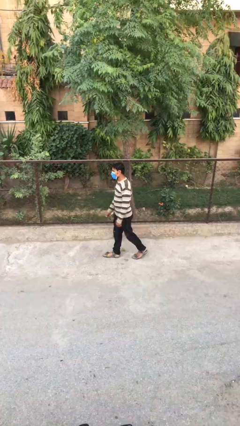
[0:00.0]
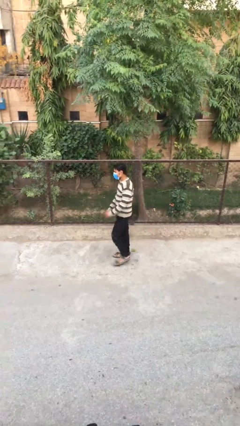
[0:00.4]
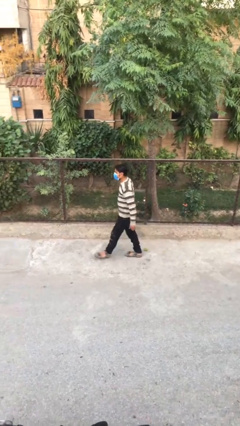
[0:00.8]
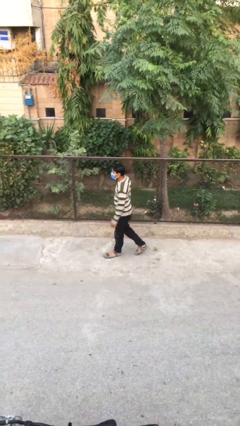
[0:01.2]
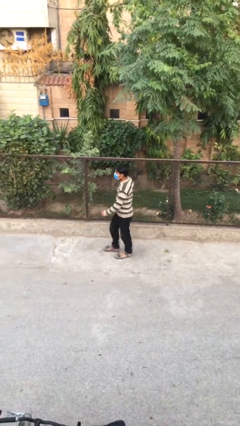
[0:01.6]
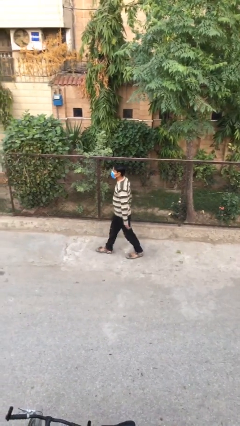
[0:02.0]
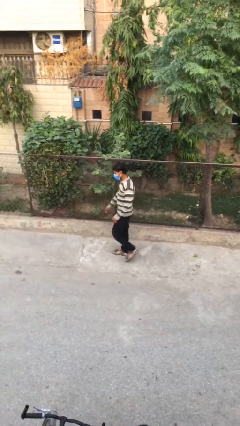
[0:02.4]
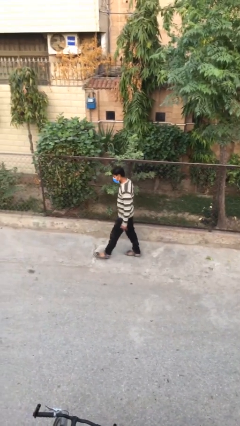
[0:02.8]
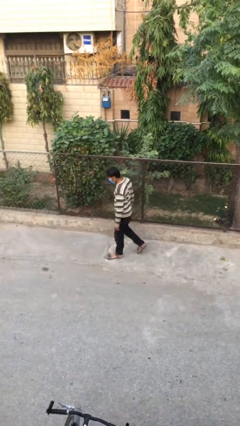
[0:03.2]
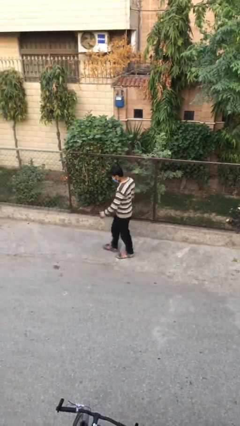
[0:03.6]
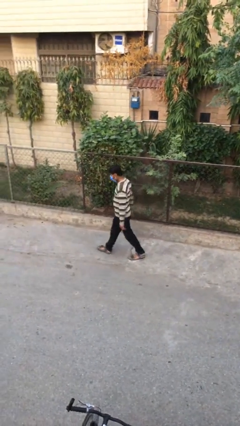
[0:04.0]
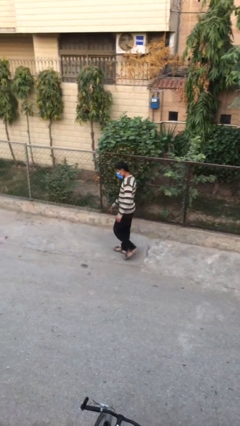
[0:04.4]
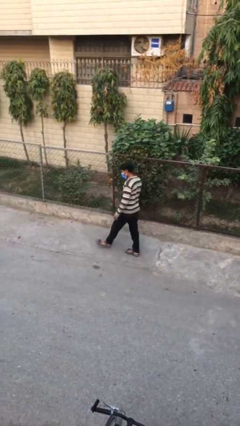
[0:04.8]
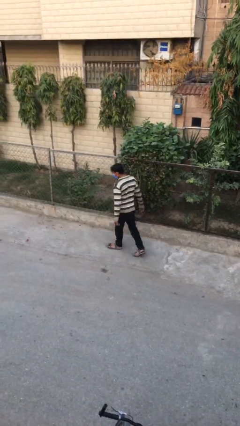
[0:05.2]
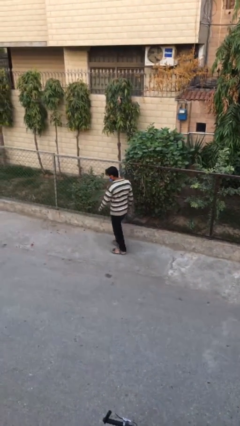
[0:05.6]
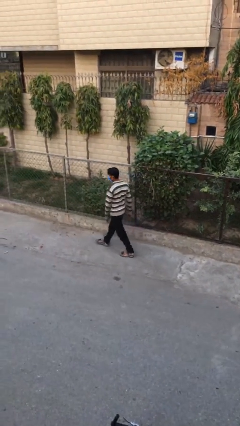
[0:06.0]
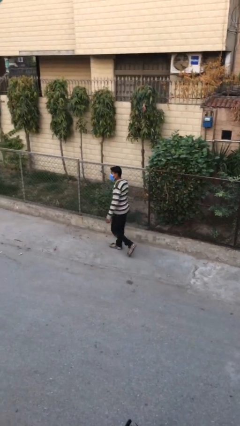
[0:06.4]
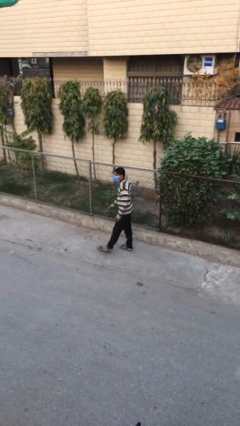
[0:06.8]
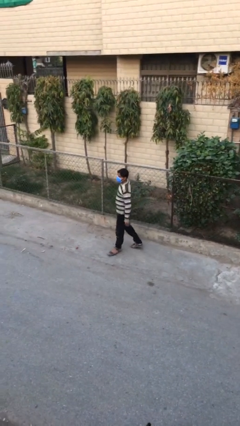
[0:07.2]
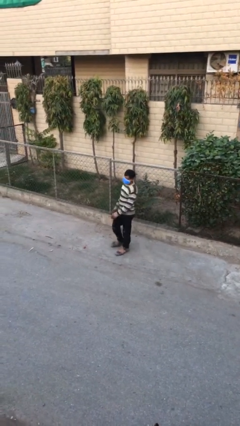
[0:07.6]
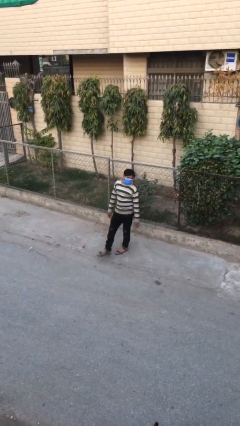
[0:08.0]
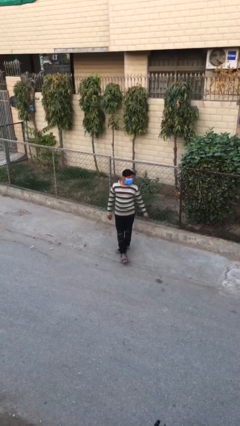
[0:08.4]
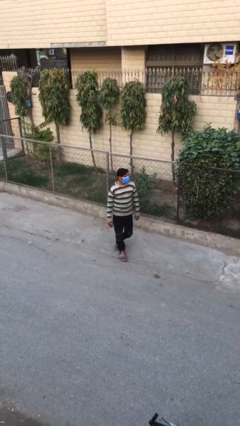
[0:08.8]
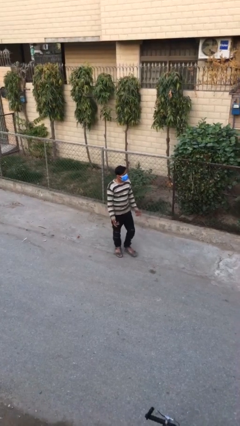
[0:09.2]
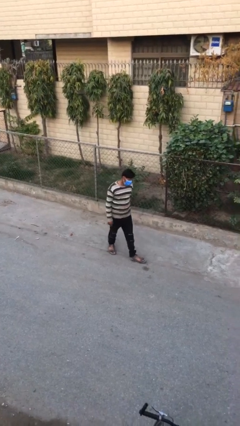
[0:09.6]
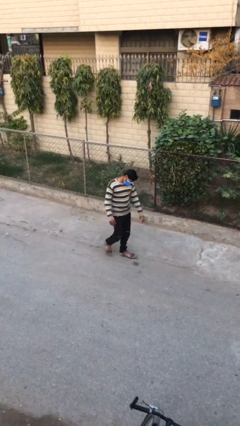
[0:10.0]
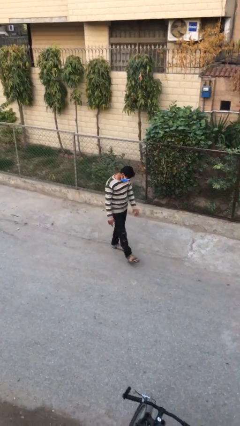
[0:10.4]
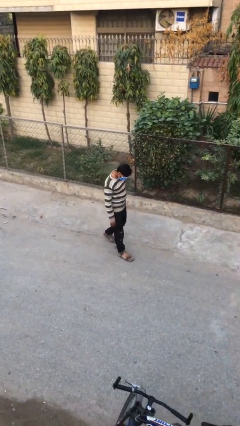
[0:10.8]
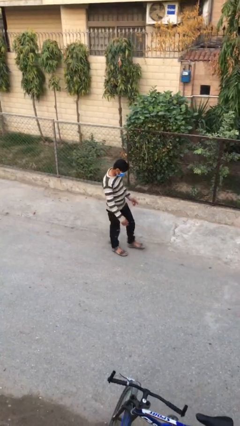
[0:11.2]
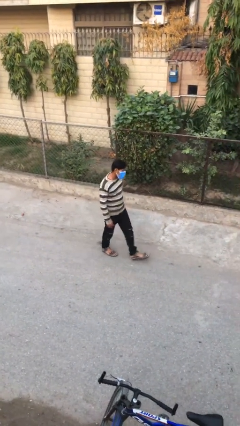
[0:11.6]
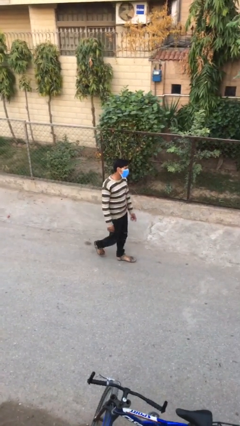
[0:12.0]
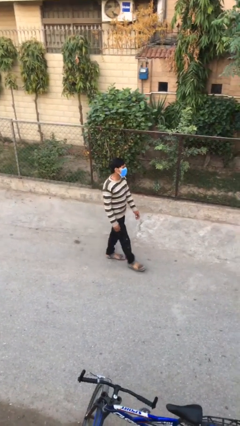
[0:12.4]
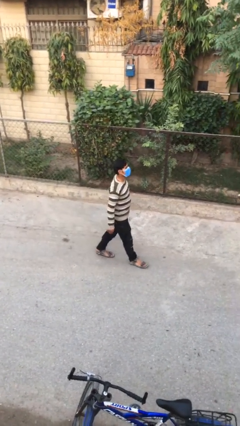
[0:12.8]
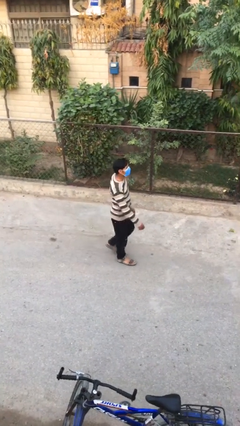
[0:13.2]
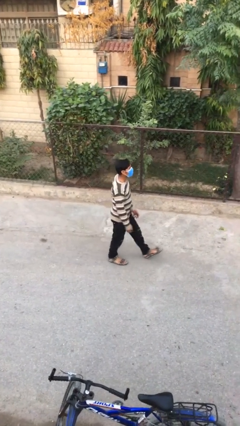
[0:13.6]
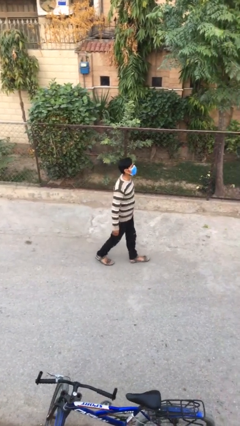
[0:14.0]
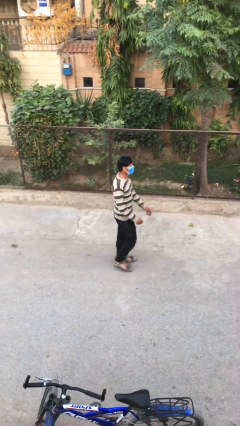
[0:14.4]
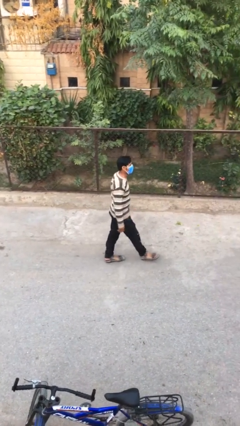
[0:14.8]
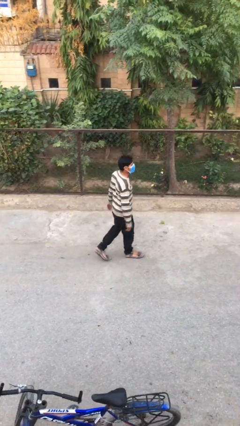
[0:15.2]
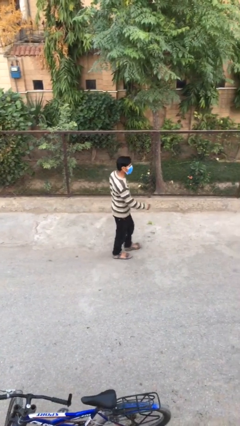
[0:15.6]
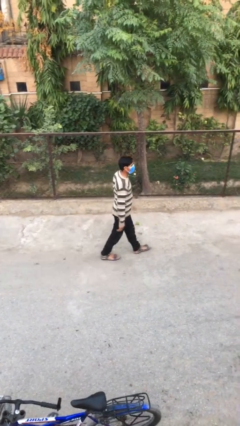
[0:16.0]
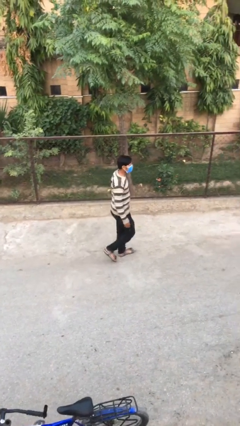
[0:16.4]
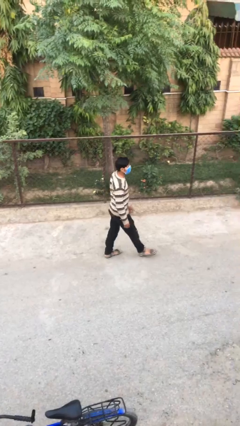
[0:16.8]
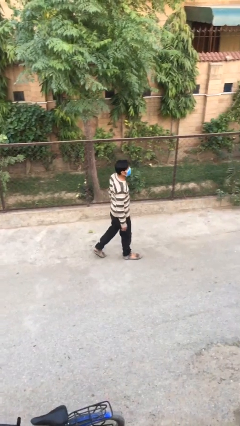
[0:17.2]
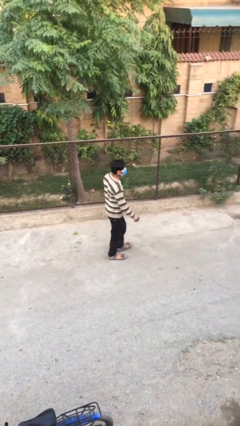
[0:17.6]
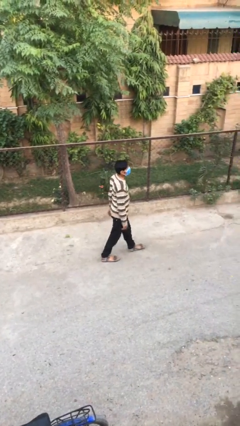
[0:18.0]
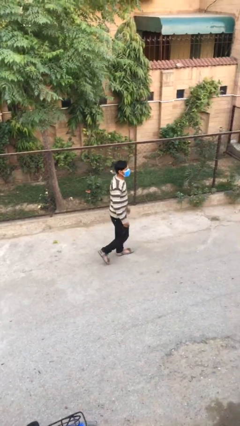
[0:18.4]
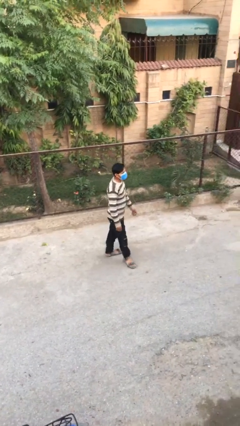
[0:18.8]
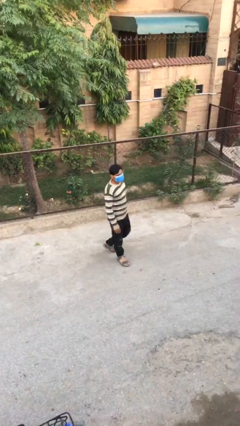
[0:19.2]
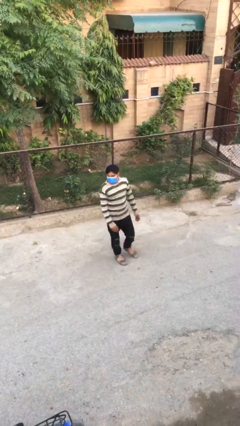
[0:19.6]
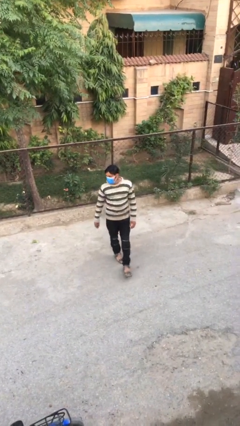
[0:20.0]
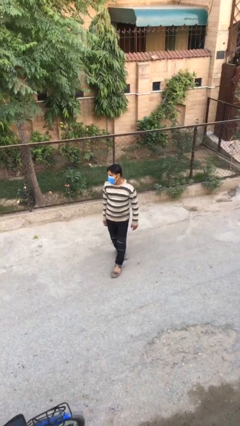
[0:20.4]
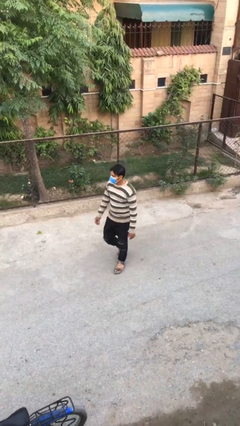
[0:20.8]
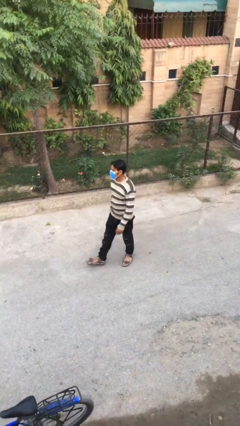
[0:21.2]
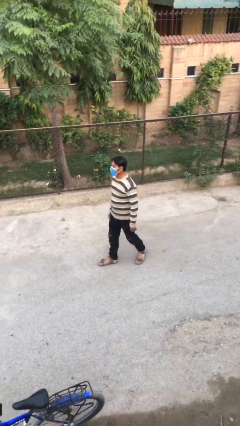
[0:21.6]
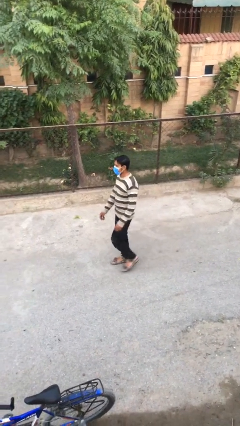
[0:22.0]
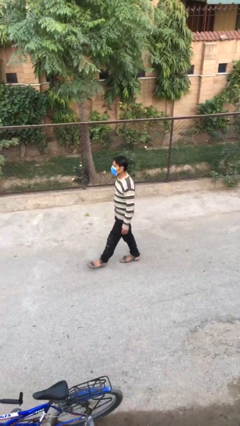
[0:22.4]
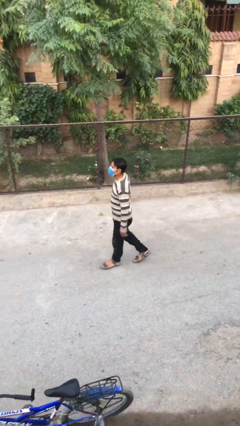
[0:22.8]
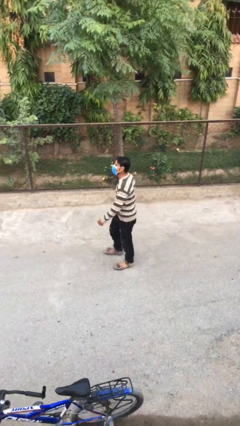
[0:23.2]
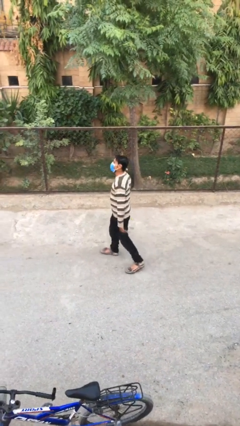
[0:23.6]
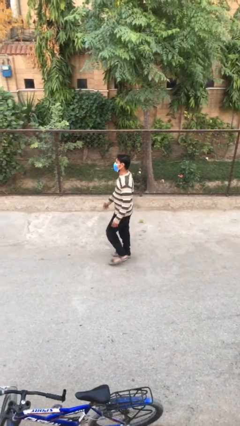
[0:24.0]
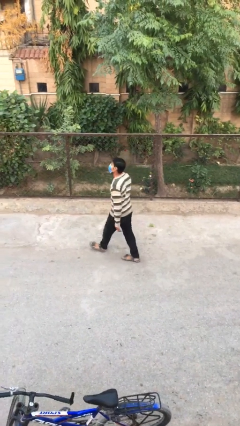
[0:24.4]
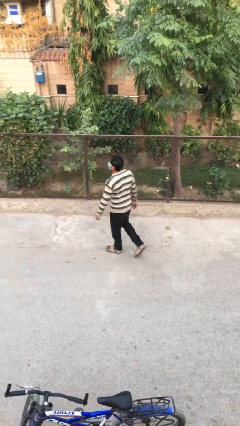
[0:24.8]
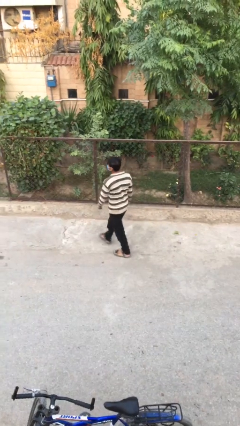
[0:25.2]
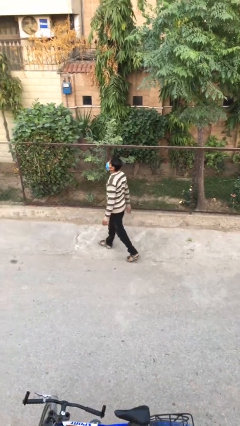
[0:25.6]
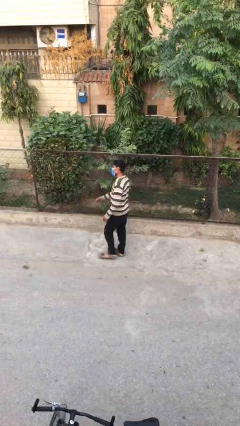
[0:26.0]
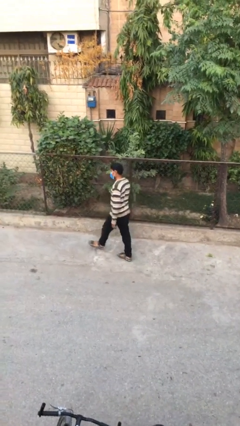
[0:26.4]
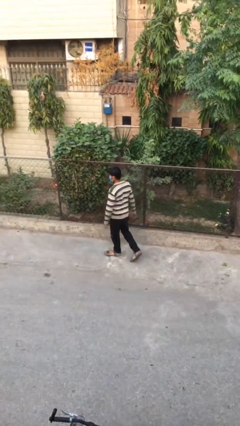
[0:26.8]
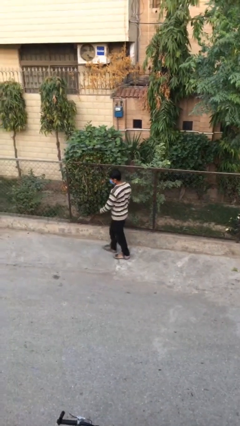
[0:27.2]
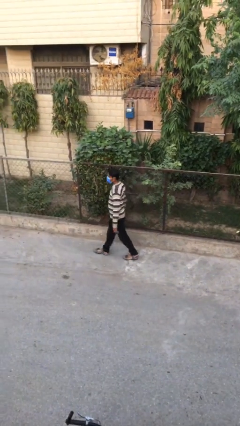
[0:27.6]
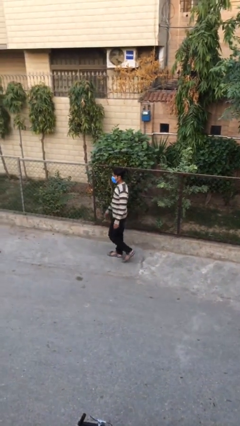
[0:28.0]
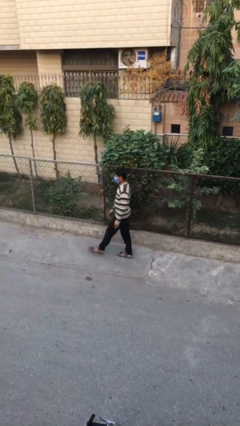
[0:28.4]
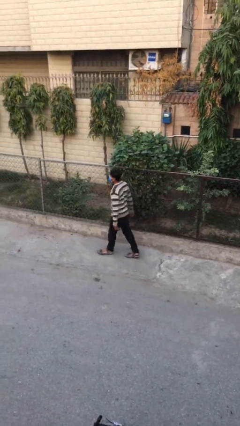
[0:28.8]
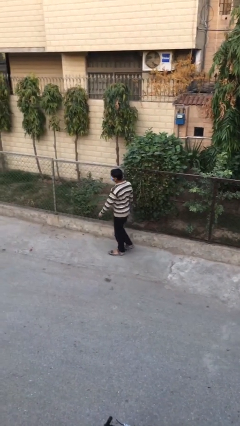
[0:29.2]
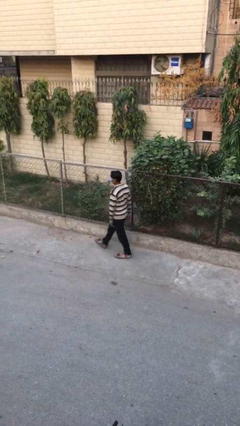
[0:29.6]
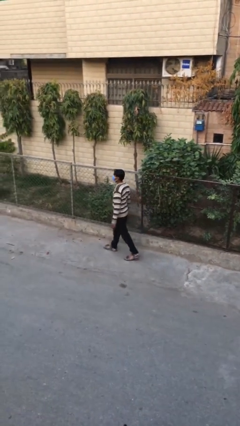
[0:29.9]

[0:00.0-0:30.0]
person walks

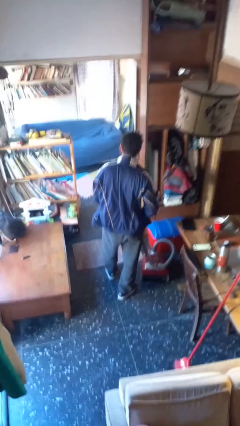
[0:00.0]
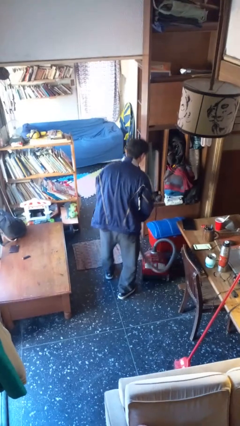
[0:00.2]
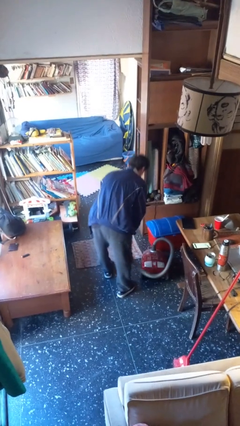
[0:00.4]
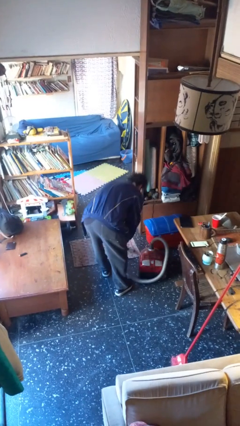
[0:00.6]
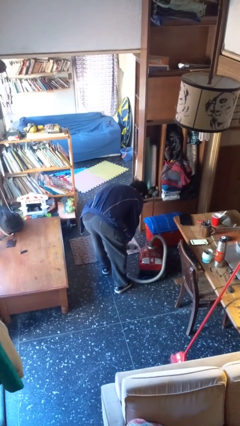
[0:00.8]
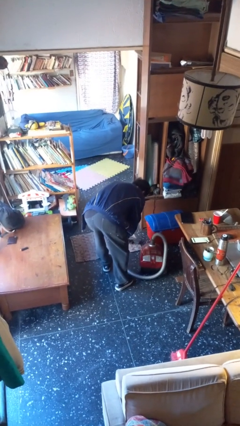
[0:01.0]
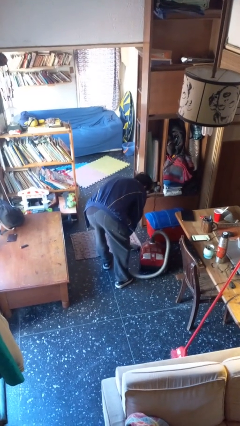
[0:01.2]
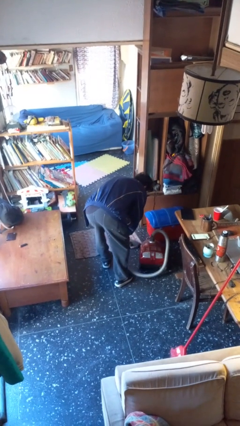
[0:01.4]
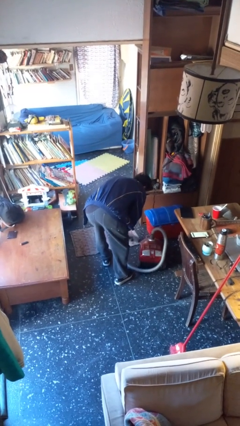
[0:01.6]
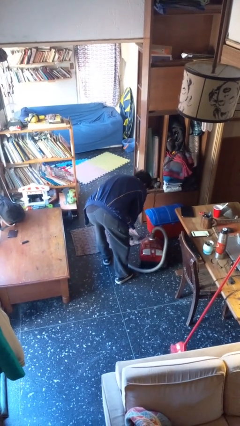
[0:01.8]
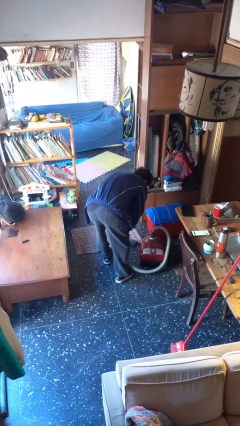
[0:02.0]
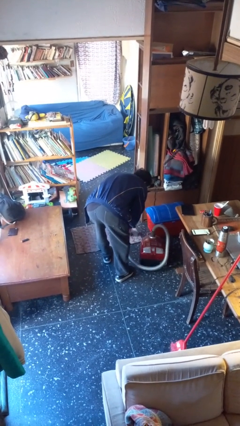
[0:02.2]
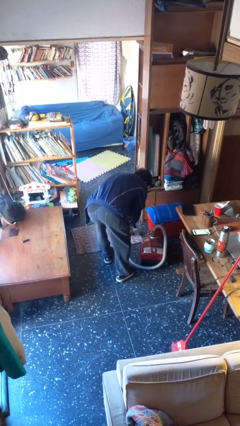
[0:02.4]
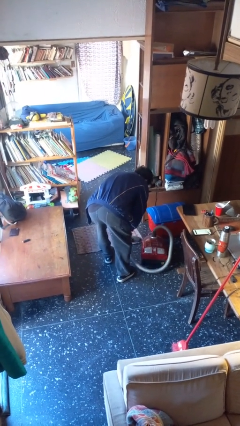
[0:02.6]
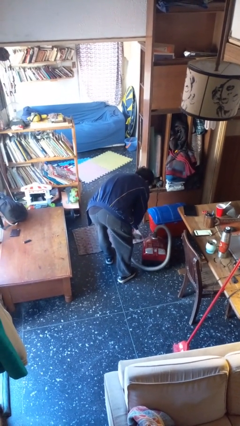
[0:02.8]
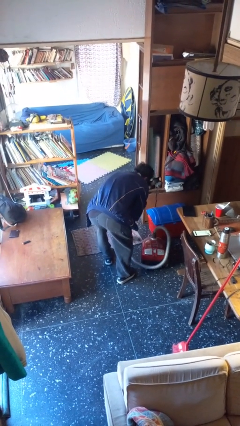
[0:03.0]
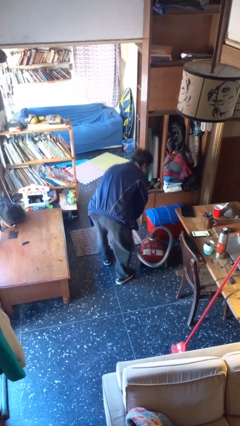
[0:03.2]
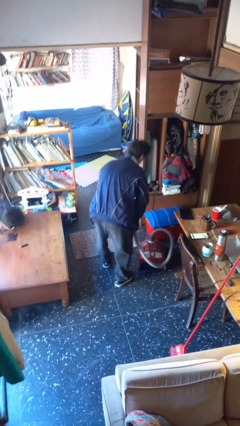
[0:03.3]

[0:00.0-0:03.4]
person vacuums carpet
